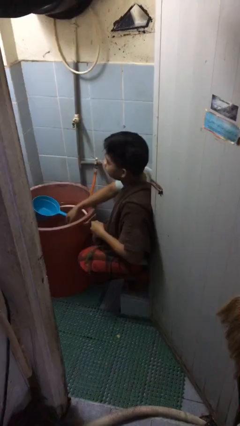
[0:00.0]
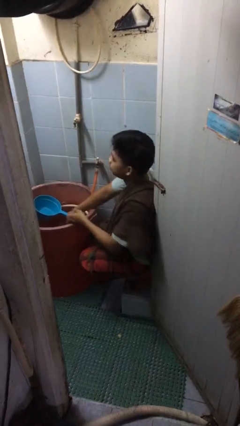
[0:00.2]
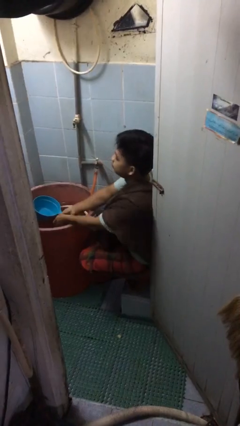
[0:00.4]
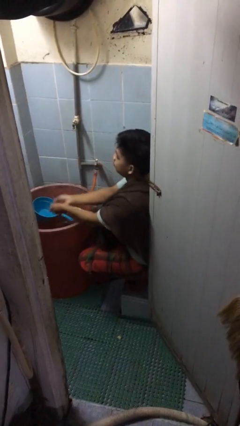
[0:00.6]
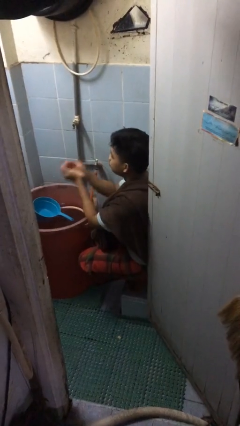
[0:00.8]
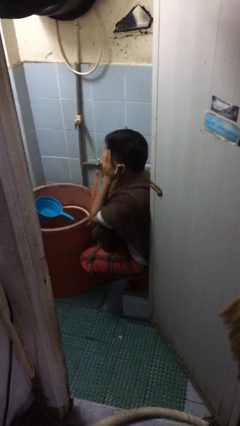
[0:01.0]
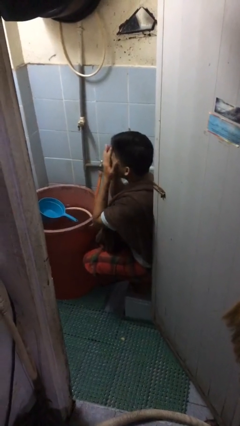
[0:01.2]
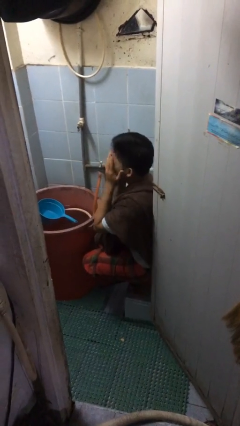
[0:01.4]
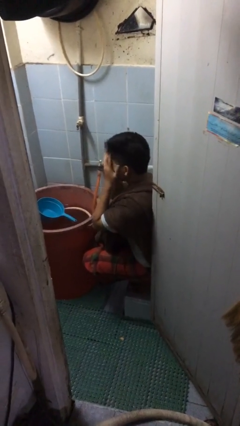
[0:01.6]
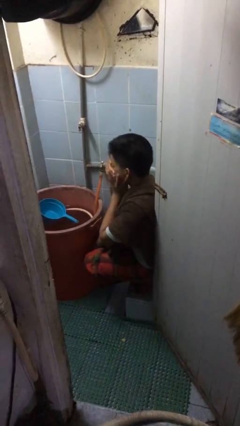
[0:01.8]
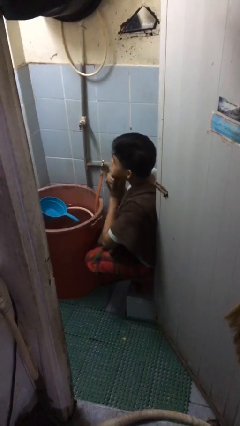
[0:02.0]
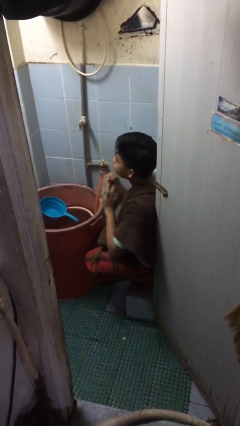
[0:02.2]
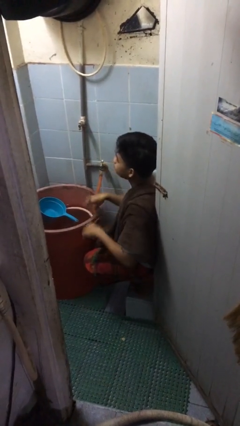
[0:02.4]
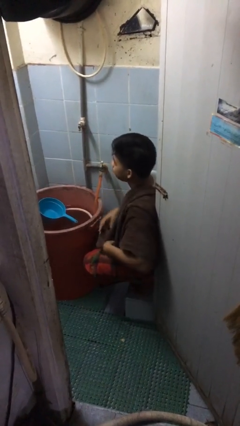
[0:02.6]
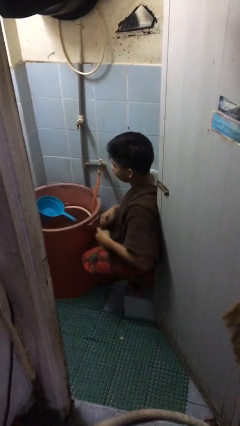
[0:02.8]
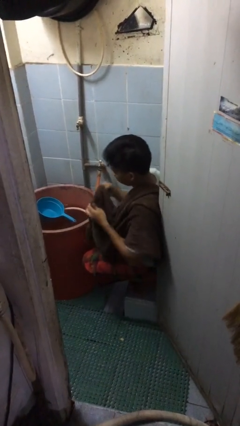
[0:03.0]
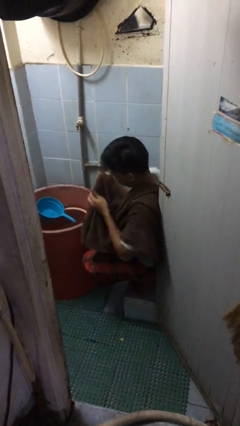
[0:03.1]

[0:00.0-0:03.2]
person washes face

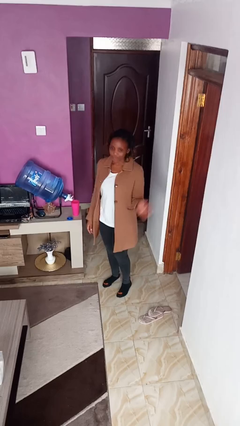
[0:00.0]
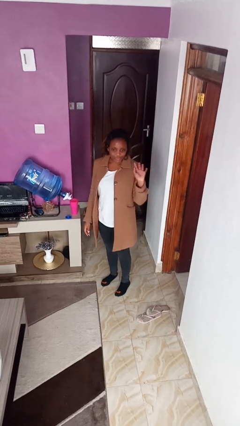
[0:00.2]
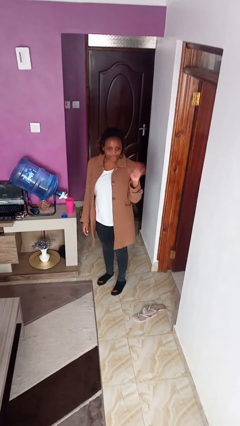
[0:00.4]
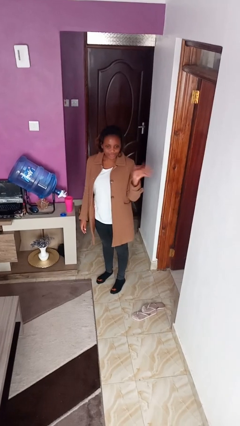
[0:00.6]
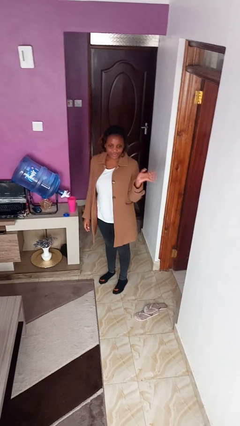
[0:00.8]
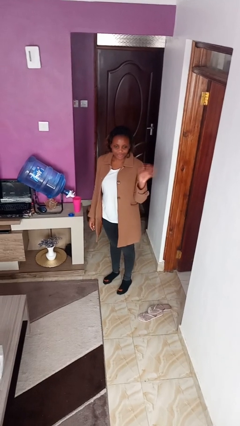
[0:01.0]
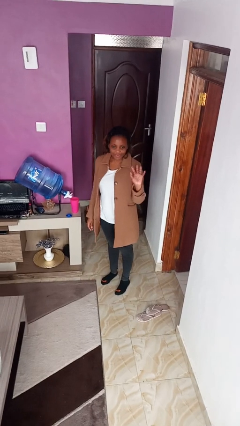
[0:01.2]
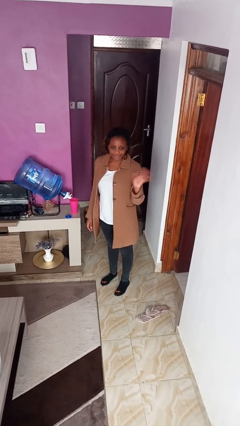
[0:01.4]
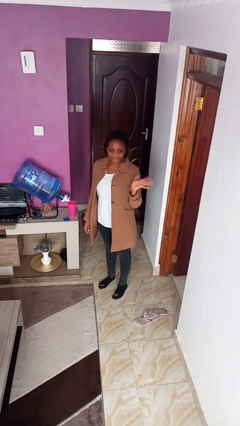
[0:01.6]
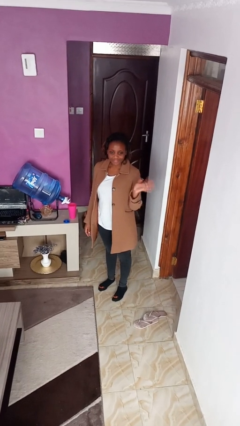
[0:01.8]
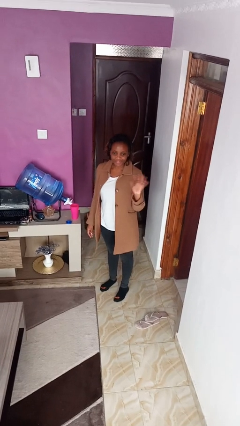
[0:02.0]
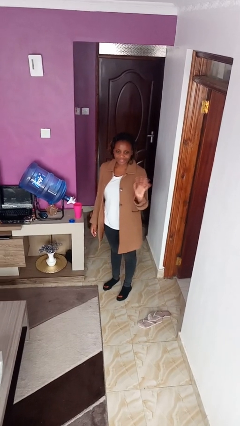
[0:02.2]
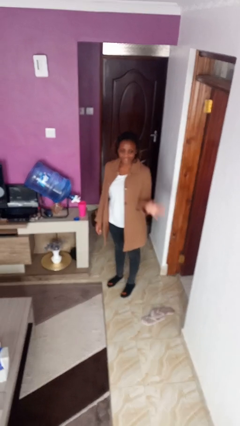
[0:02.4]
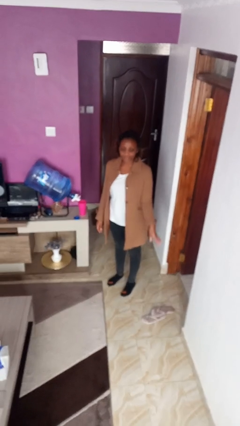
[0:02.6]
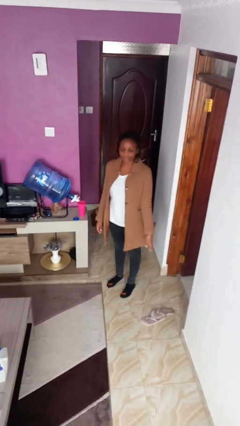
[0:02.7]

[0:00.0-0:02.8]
person waves at person

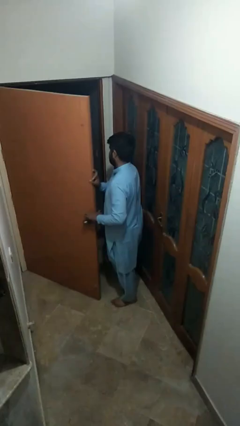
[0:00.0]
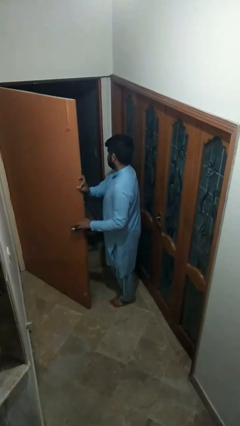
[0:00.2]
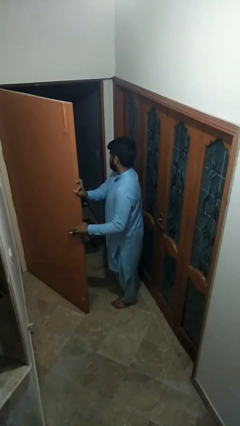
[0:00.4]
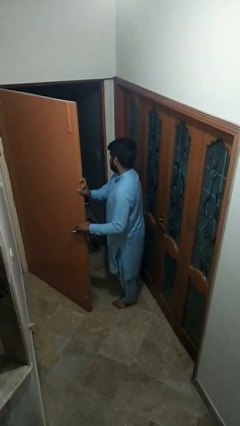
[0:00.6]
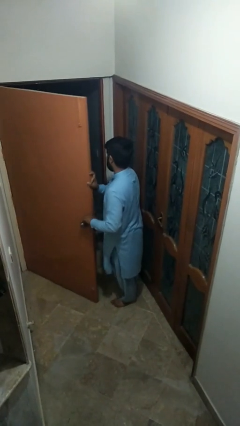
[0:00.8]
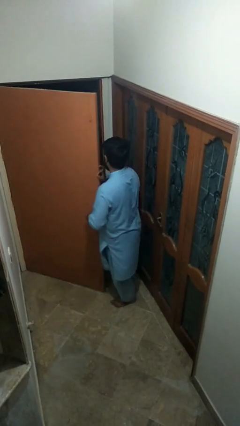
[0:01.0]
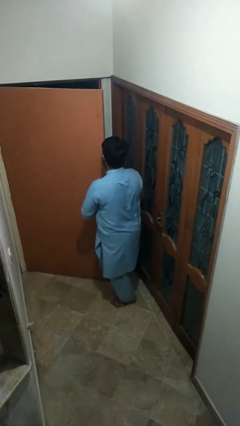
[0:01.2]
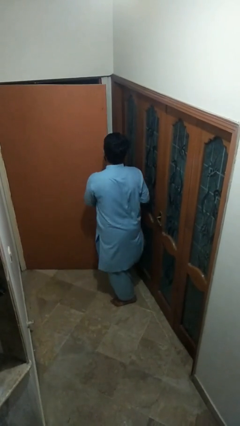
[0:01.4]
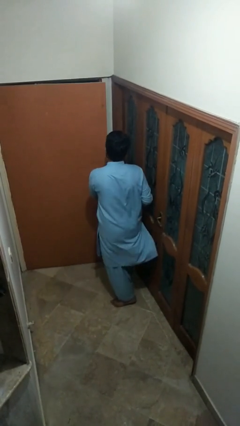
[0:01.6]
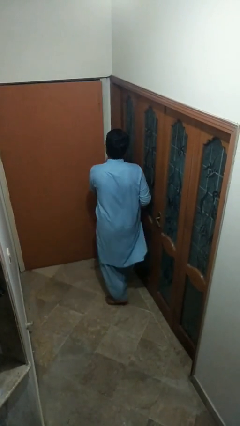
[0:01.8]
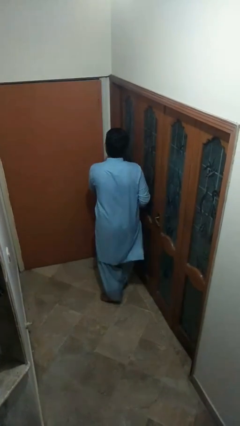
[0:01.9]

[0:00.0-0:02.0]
person closes facility door

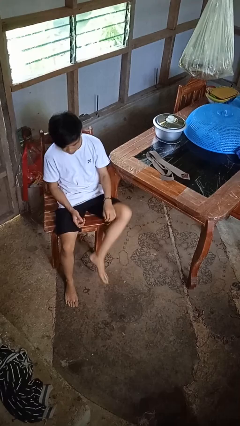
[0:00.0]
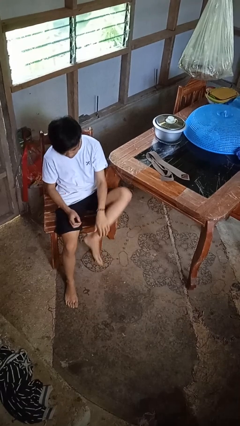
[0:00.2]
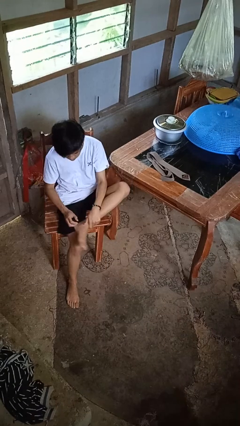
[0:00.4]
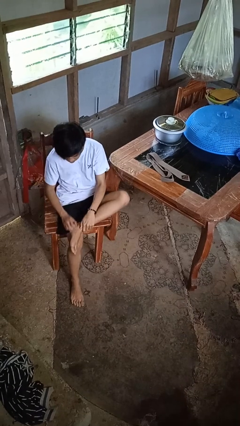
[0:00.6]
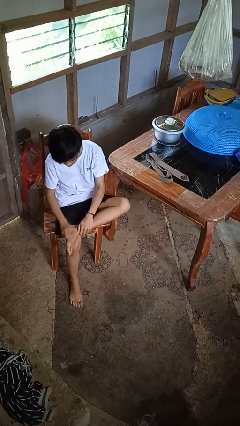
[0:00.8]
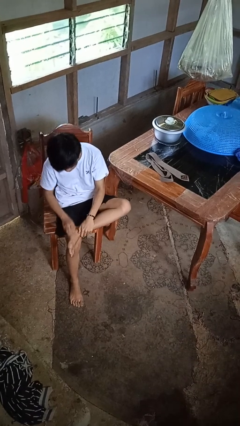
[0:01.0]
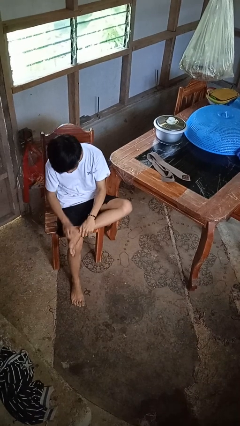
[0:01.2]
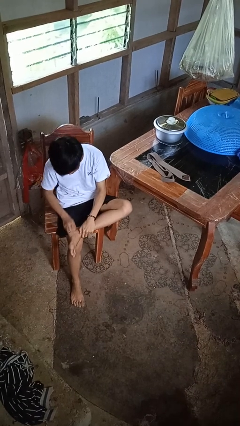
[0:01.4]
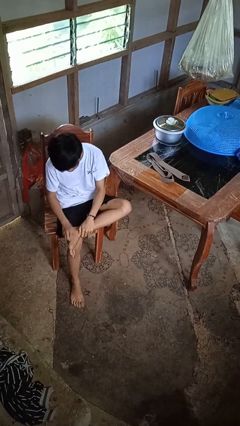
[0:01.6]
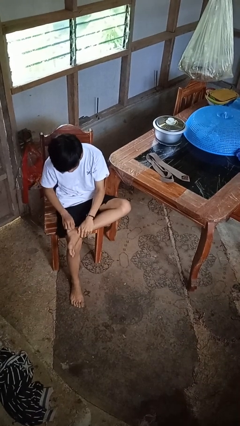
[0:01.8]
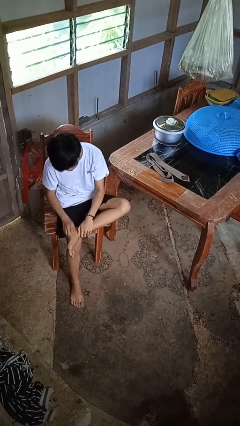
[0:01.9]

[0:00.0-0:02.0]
person rubs foot

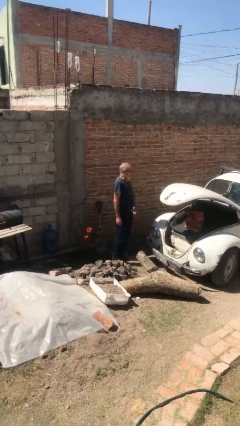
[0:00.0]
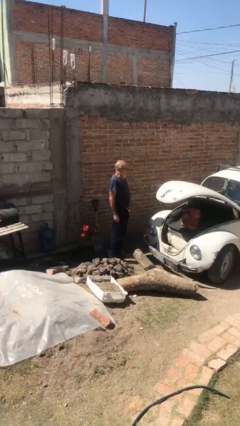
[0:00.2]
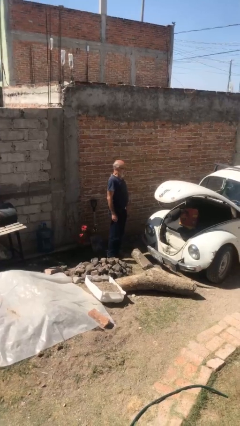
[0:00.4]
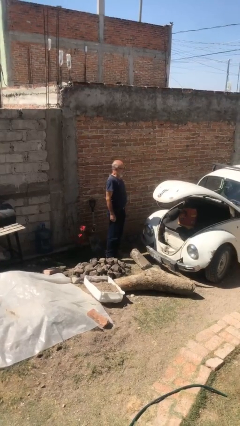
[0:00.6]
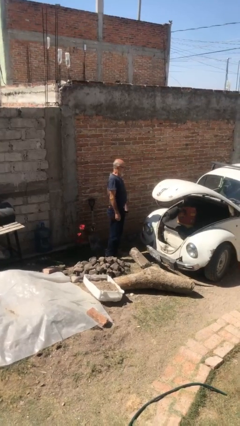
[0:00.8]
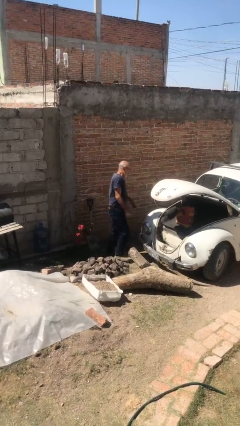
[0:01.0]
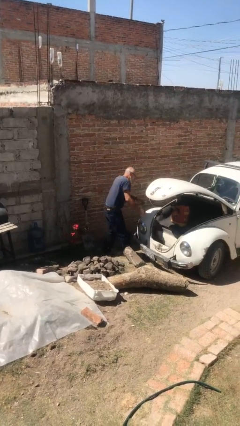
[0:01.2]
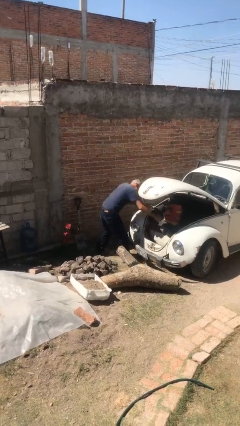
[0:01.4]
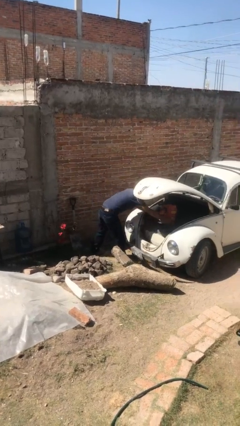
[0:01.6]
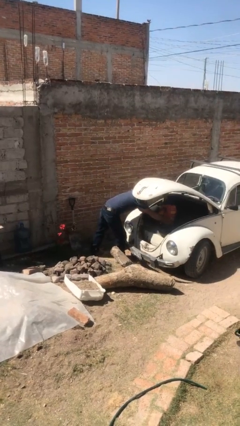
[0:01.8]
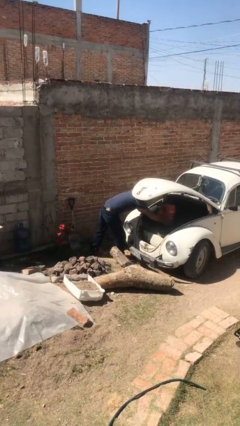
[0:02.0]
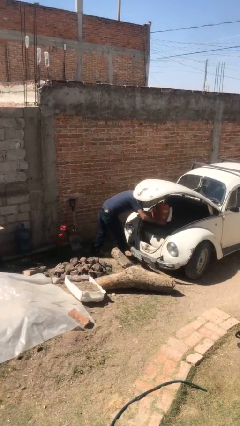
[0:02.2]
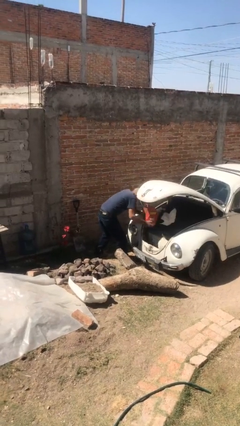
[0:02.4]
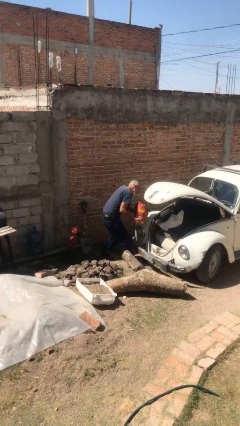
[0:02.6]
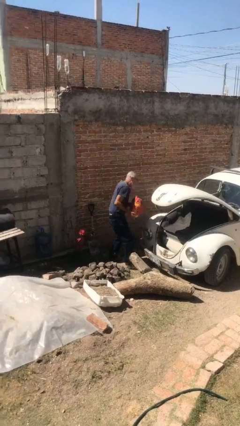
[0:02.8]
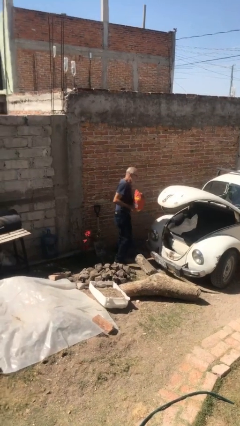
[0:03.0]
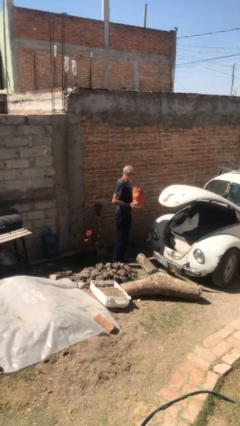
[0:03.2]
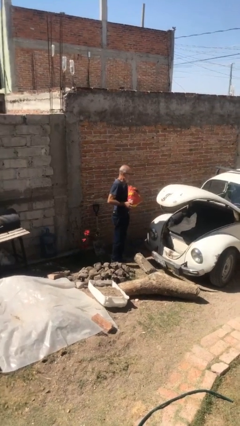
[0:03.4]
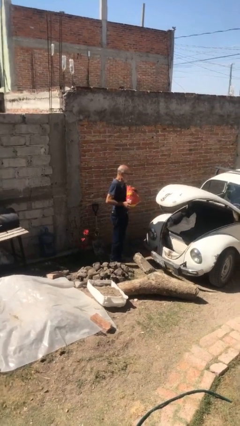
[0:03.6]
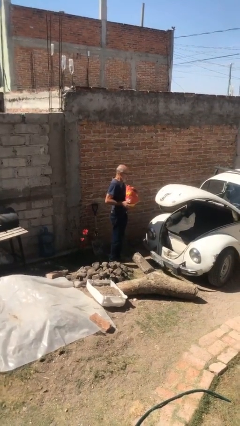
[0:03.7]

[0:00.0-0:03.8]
person unloads car

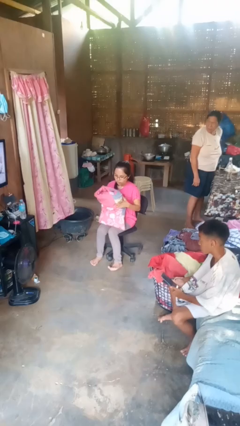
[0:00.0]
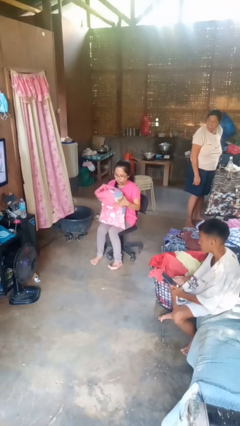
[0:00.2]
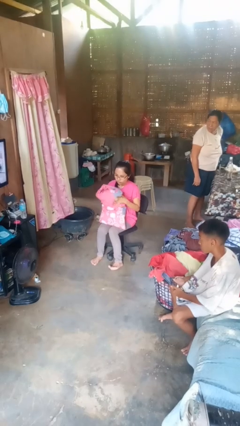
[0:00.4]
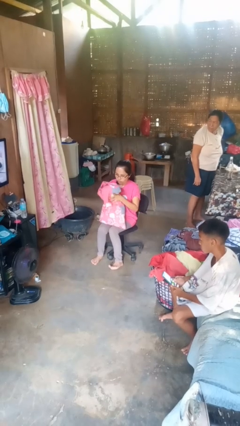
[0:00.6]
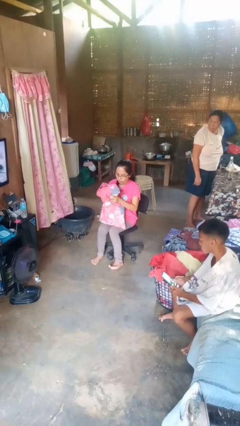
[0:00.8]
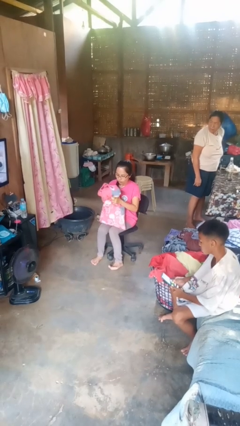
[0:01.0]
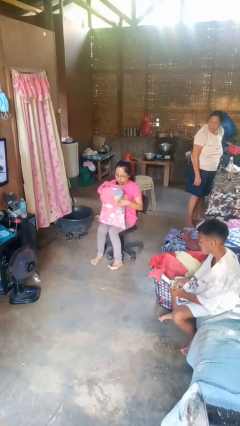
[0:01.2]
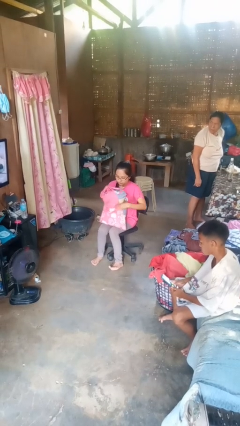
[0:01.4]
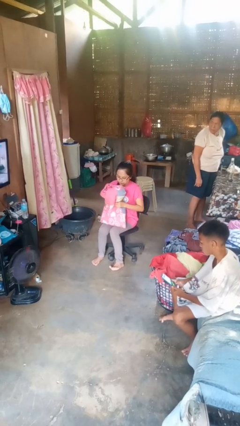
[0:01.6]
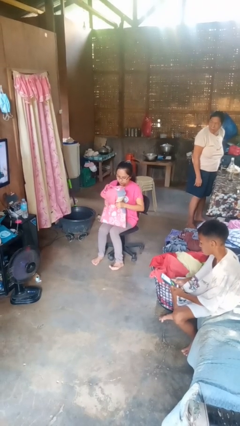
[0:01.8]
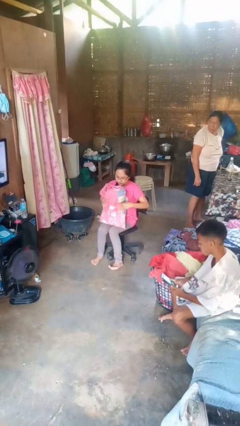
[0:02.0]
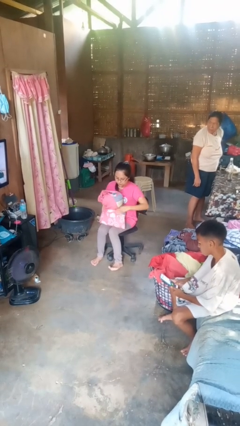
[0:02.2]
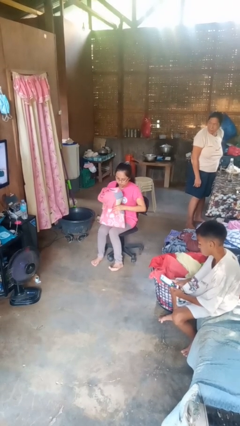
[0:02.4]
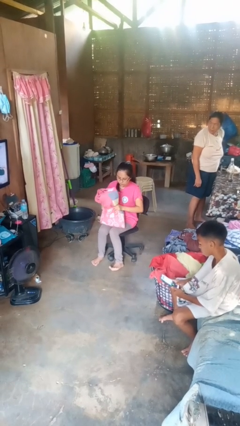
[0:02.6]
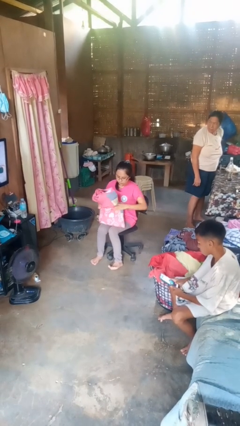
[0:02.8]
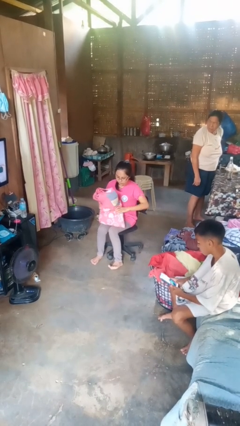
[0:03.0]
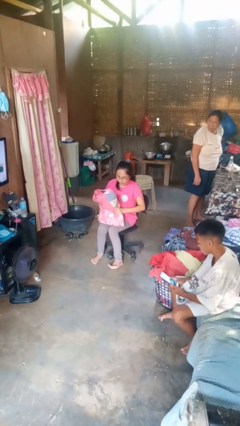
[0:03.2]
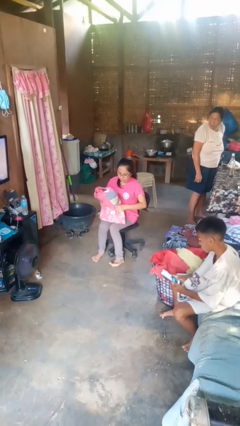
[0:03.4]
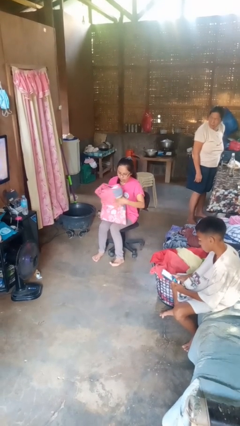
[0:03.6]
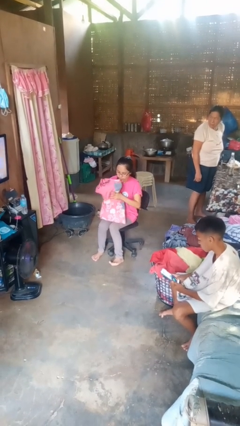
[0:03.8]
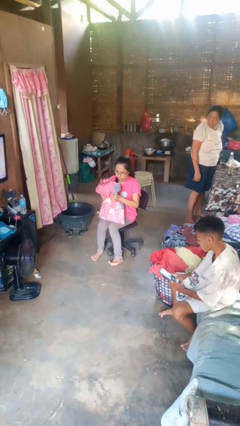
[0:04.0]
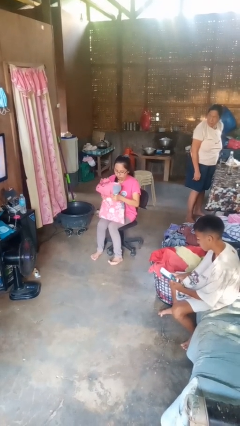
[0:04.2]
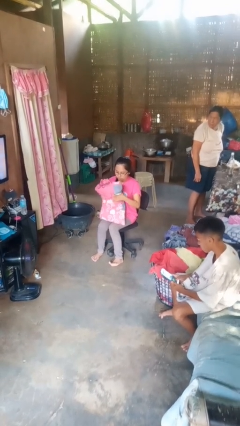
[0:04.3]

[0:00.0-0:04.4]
person squeezes object
